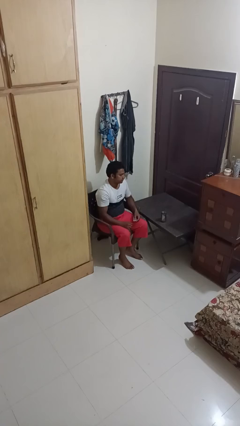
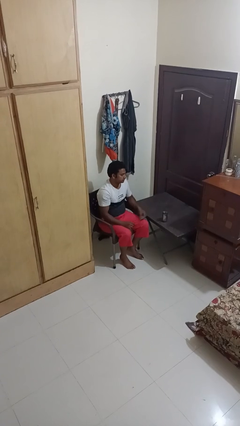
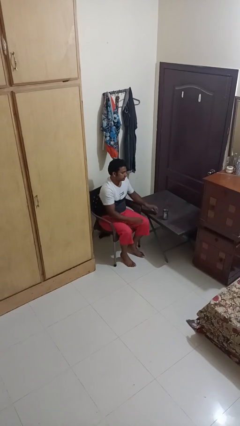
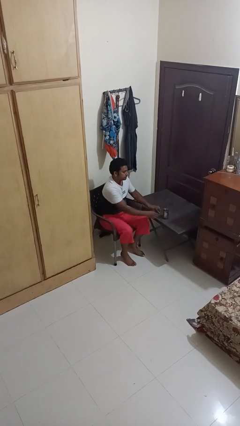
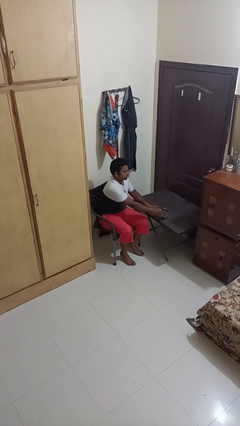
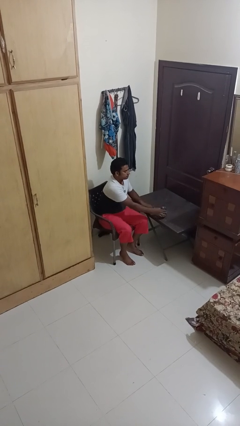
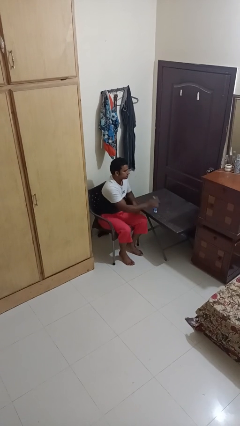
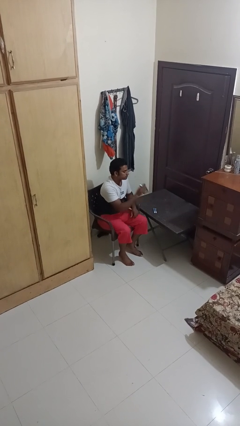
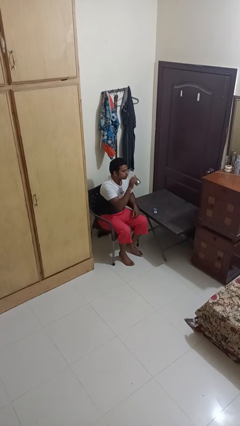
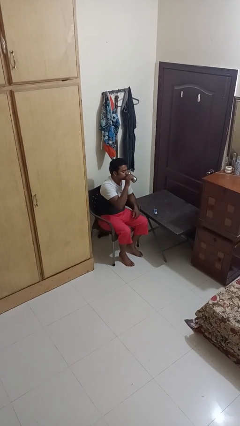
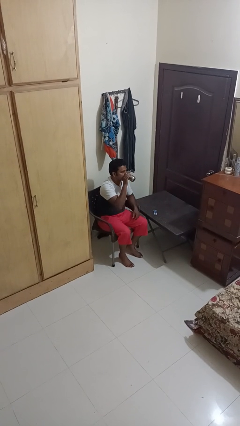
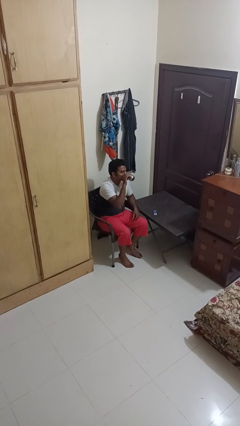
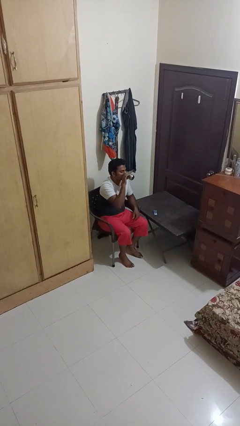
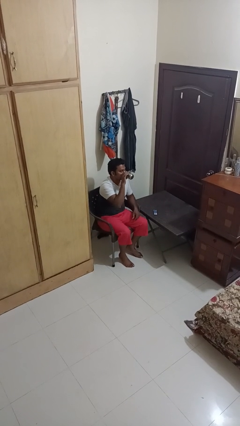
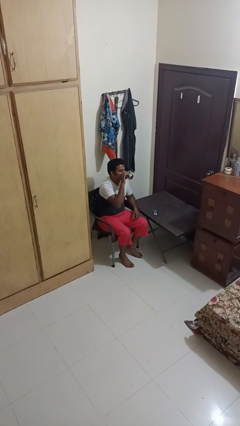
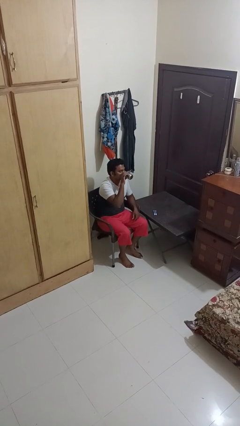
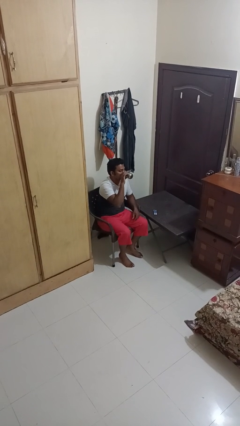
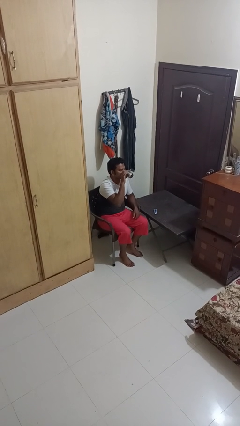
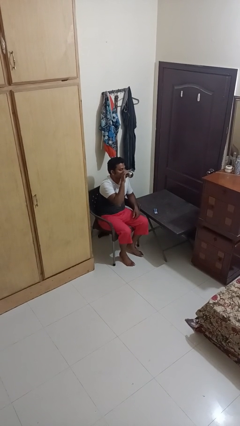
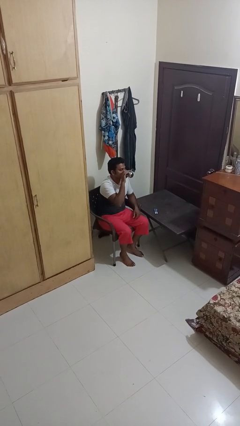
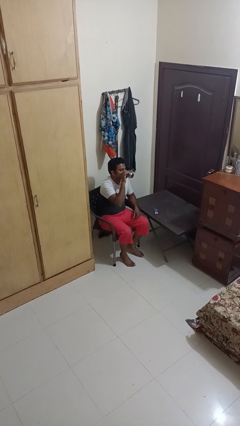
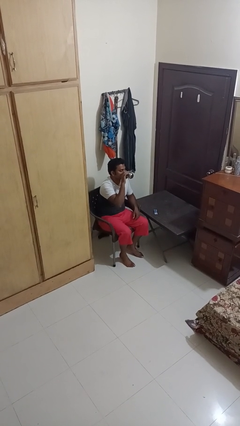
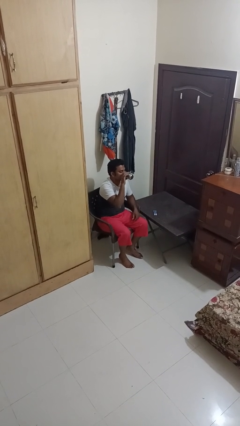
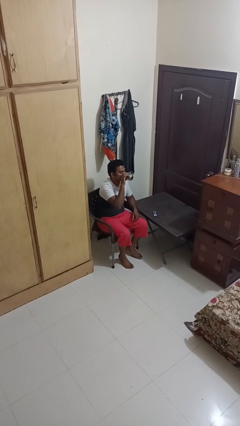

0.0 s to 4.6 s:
person drinks from cup

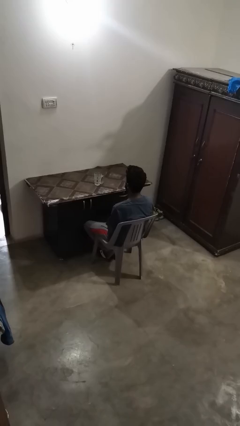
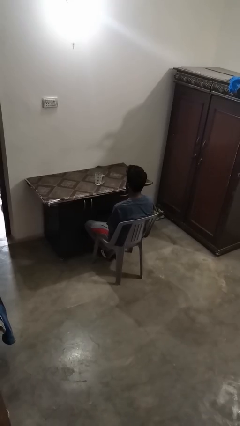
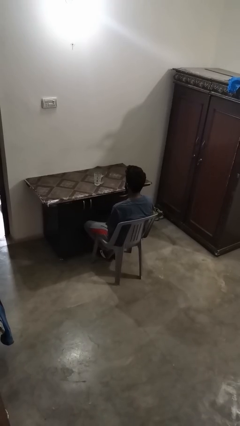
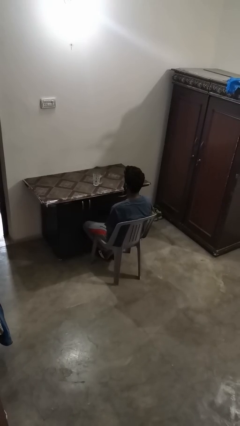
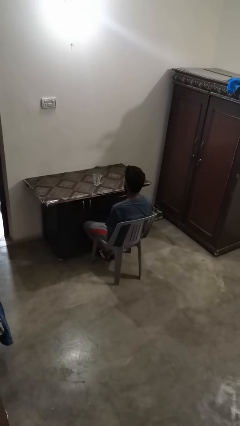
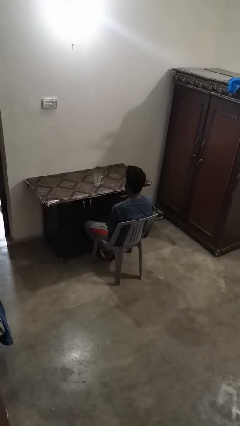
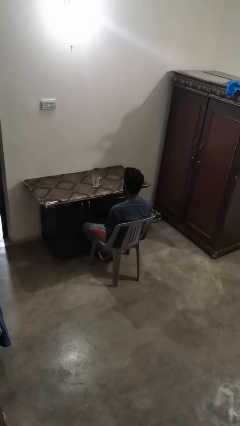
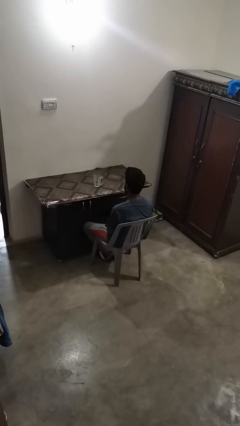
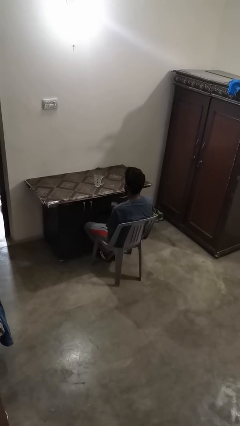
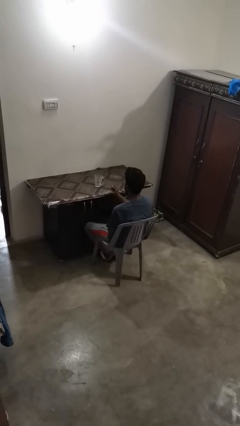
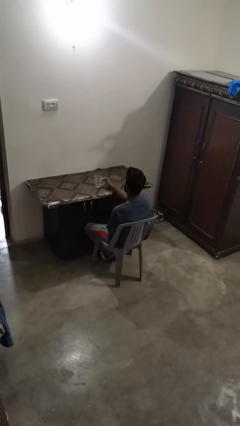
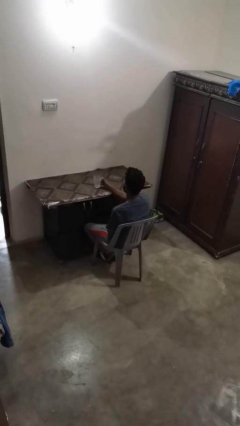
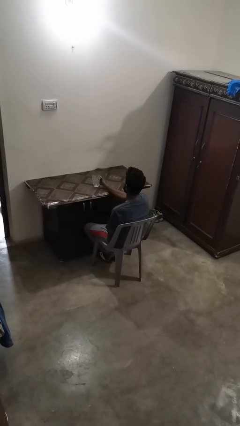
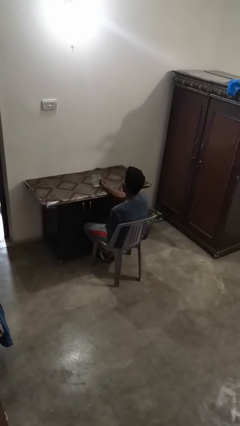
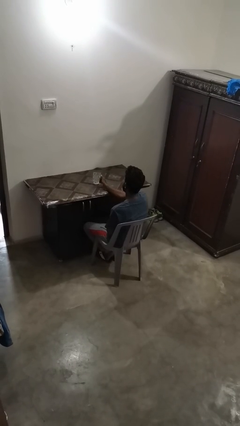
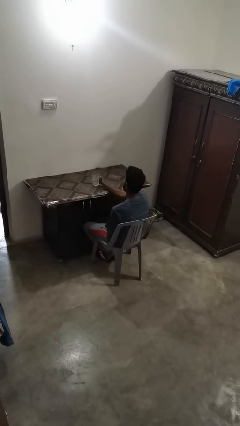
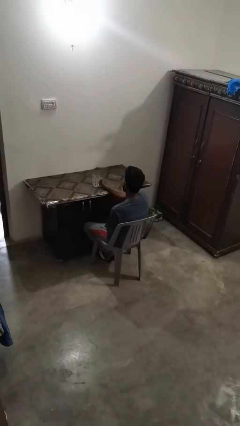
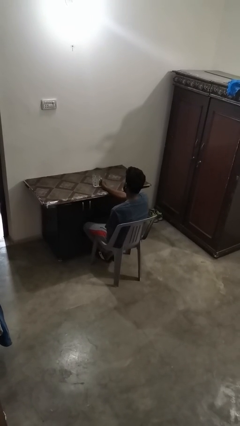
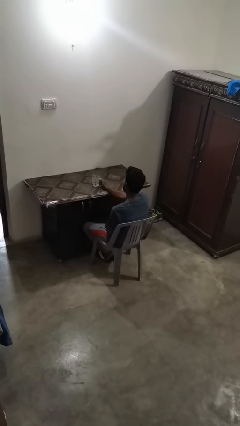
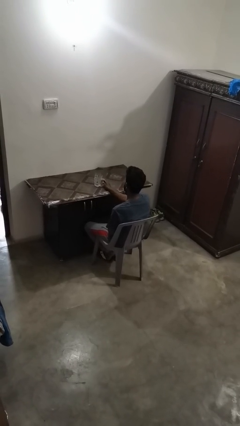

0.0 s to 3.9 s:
person knocks over glass

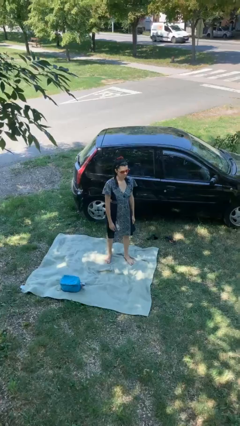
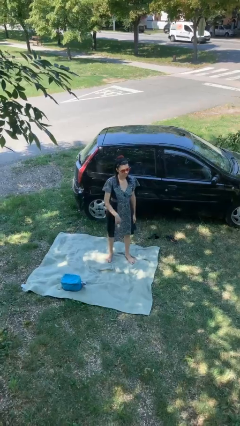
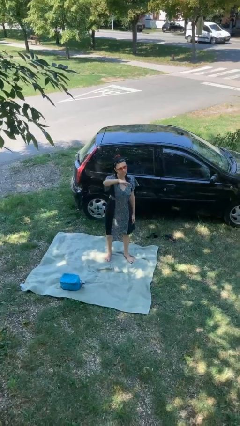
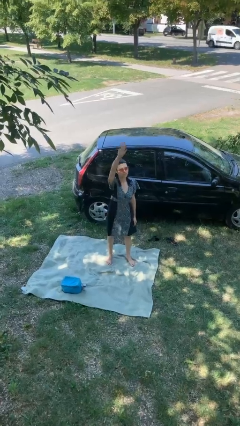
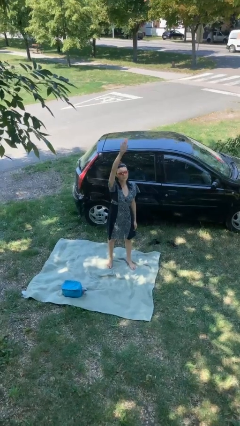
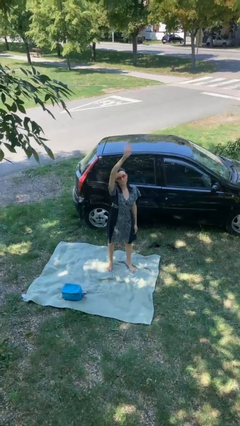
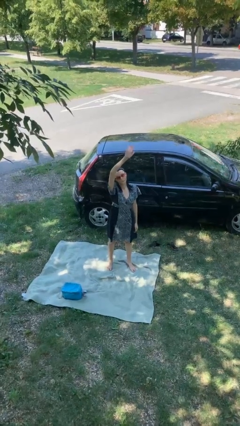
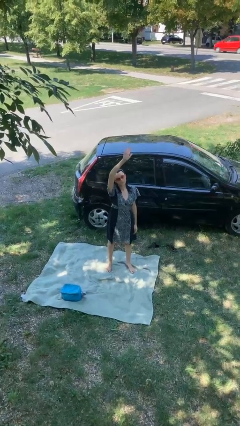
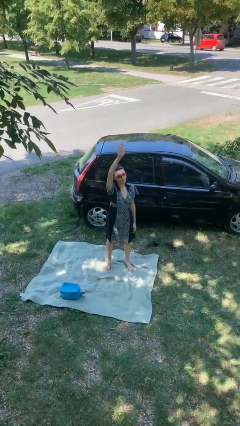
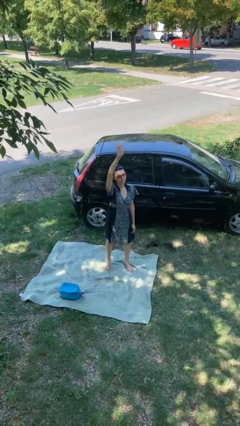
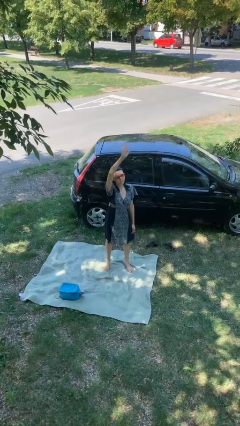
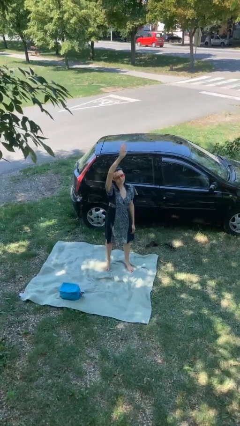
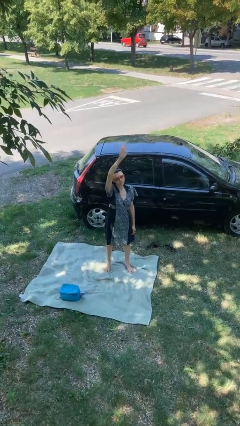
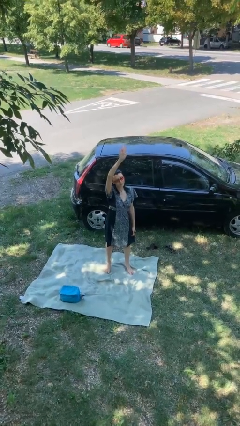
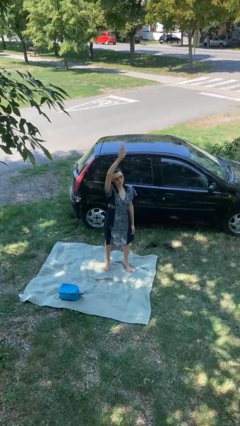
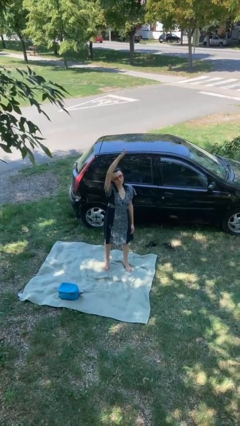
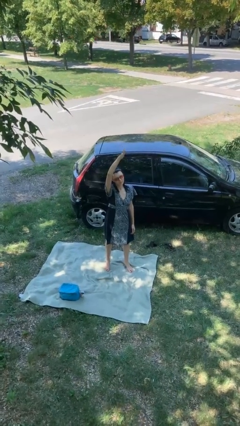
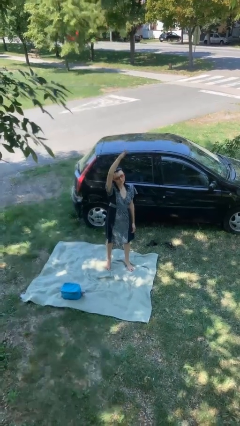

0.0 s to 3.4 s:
person gestures raise hand

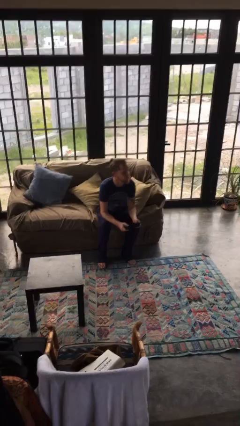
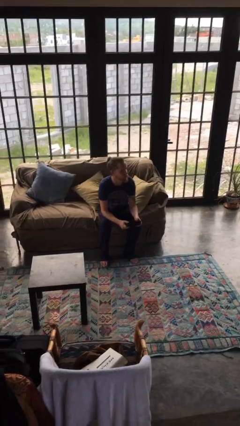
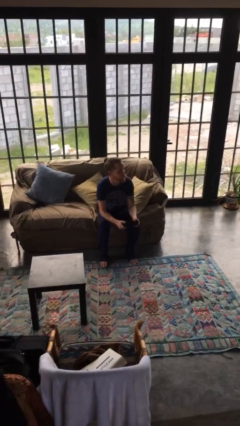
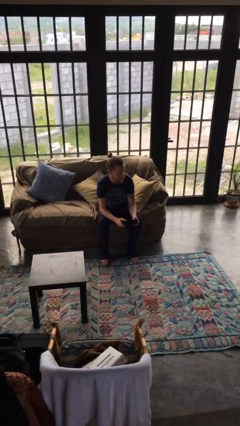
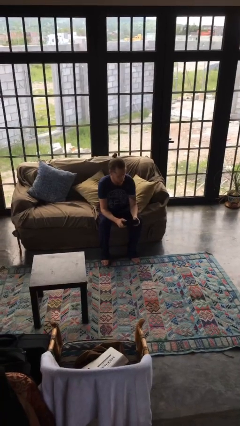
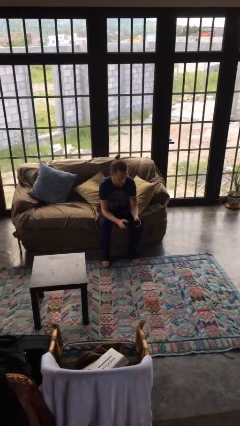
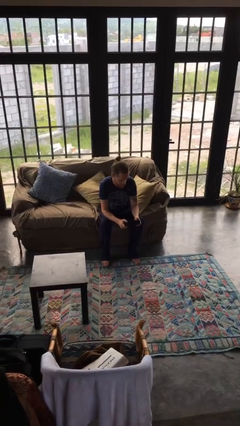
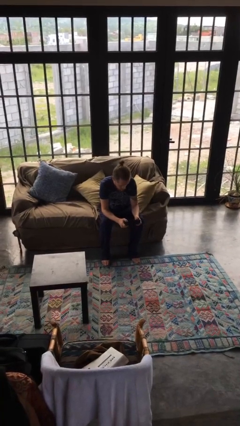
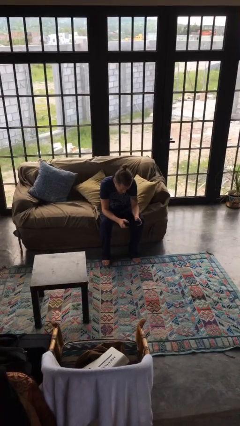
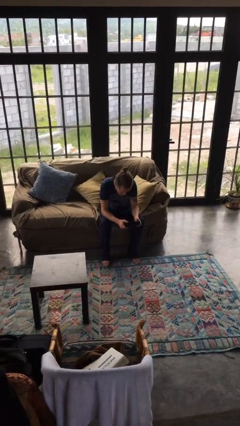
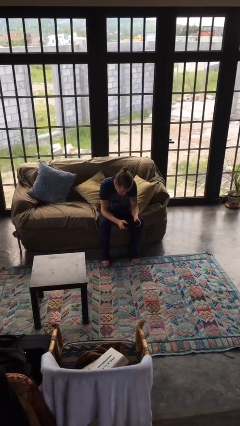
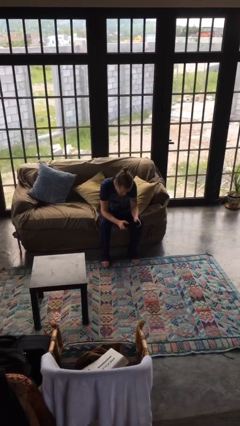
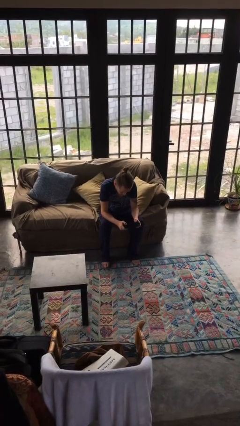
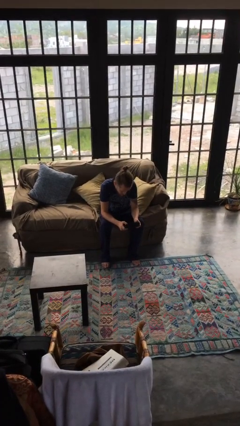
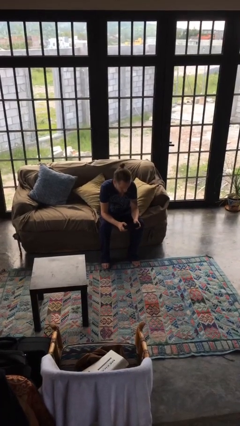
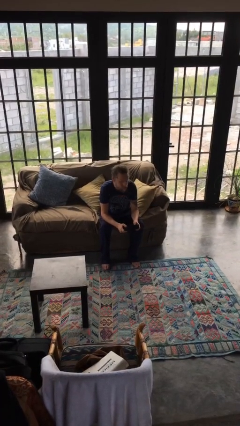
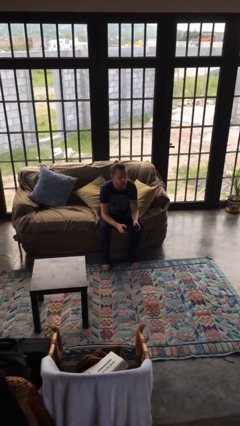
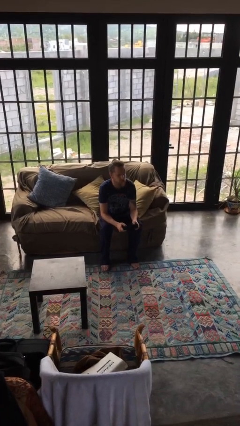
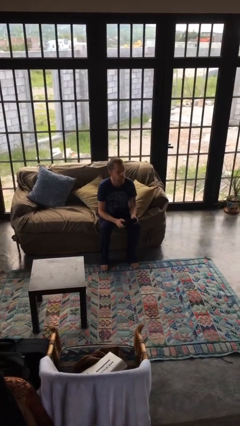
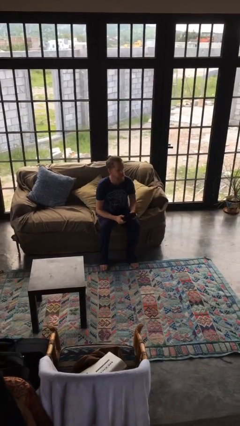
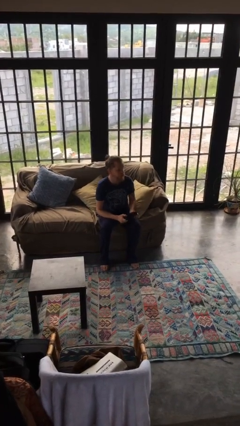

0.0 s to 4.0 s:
person interacts with handheld game

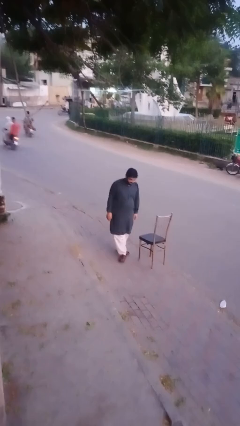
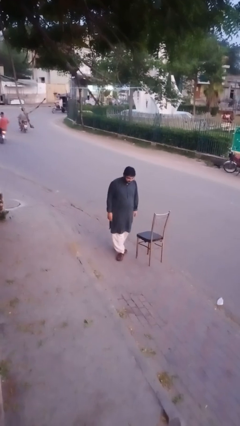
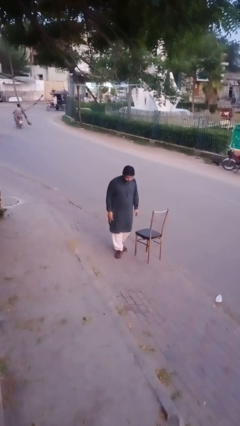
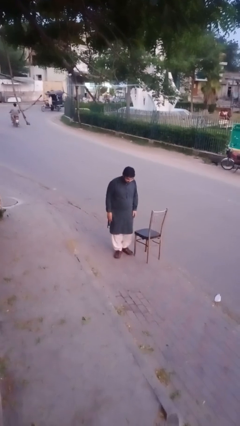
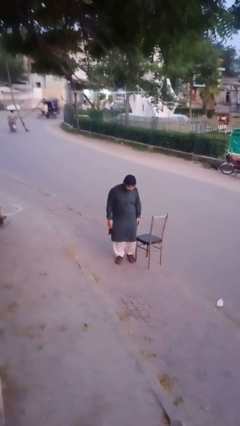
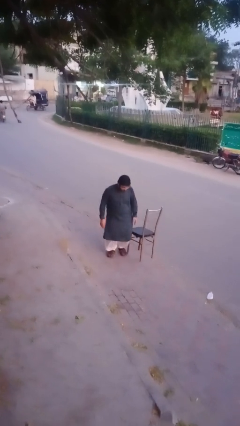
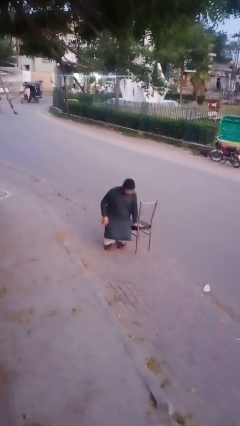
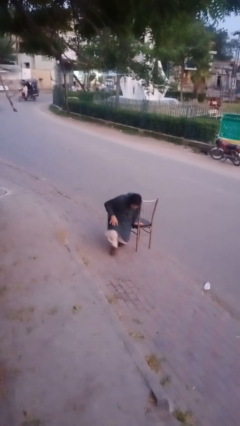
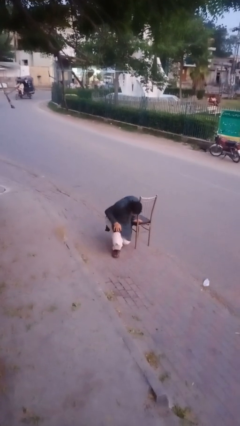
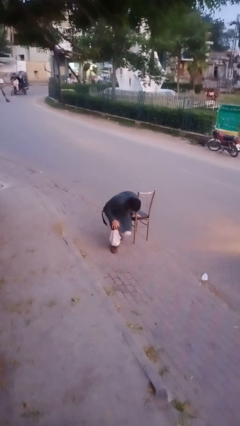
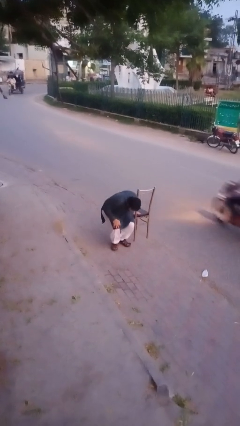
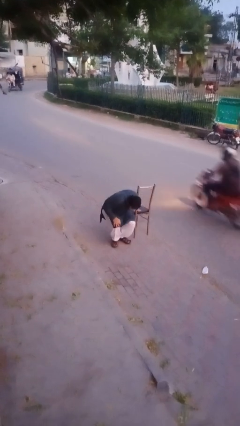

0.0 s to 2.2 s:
person lies down on floor
